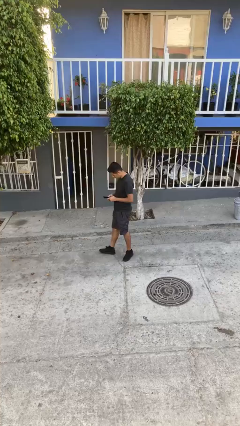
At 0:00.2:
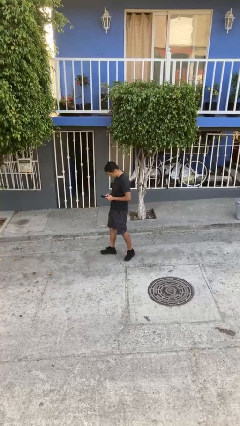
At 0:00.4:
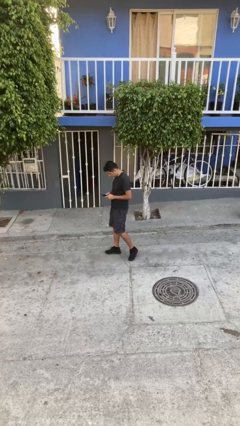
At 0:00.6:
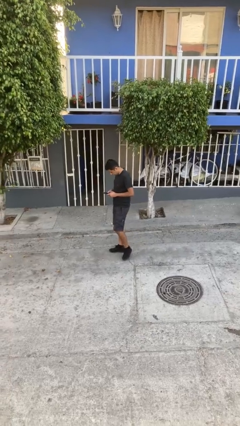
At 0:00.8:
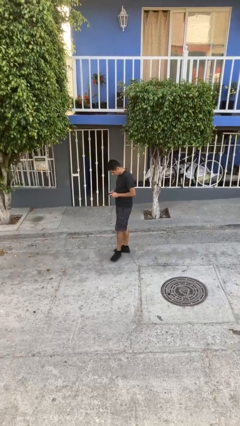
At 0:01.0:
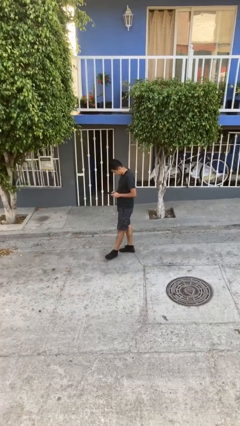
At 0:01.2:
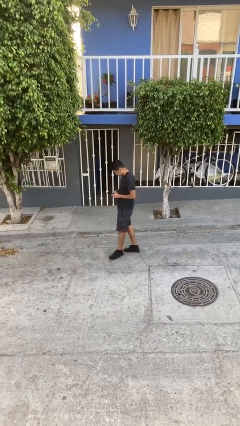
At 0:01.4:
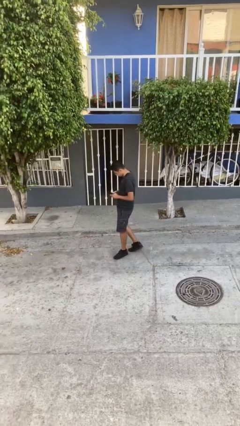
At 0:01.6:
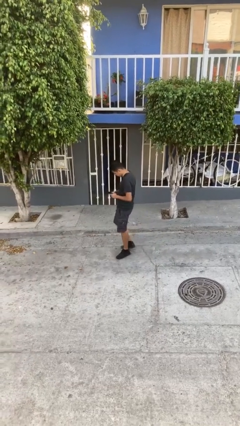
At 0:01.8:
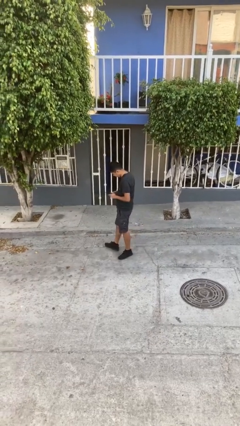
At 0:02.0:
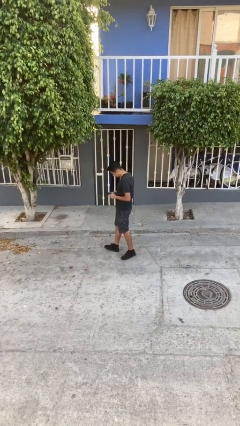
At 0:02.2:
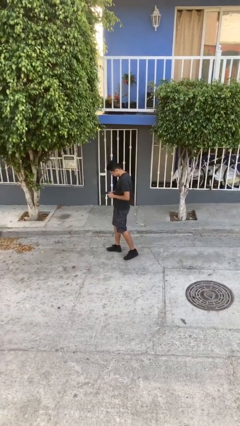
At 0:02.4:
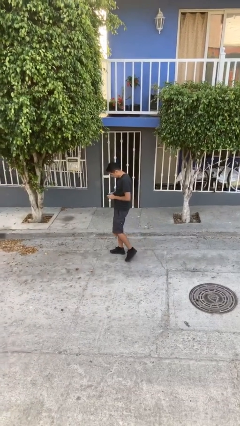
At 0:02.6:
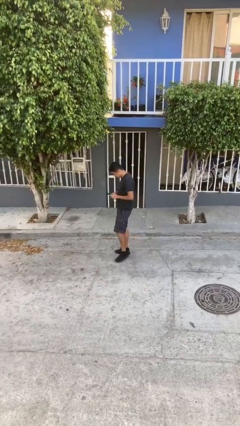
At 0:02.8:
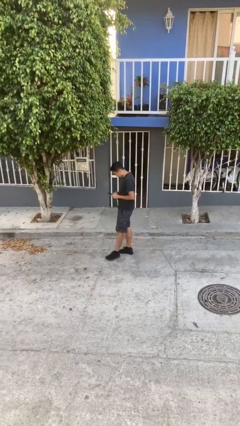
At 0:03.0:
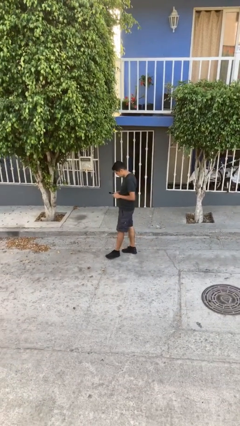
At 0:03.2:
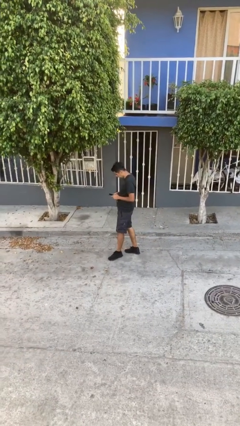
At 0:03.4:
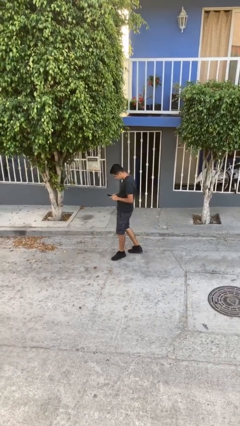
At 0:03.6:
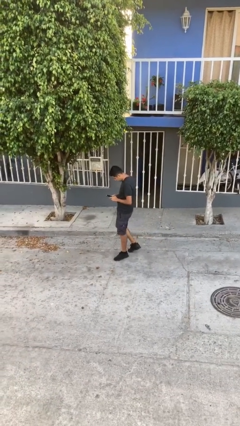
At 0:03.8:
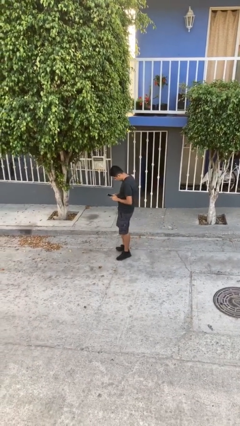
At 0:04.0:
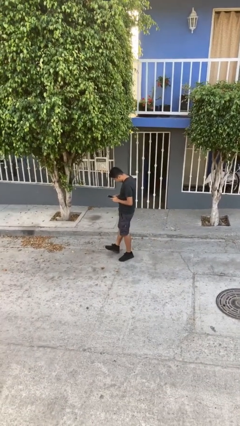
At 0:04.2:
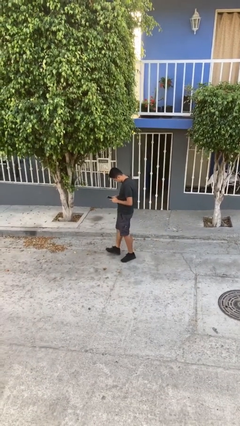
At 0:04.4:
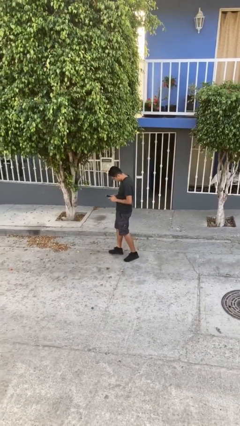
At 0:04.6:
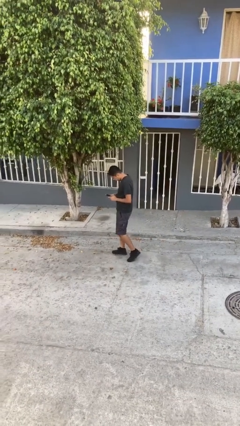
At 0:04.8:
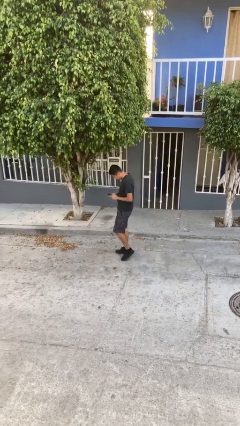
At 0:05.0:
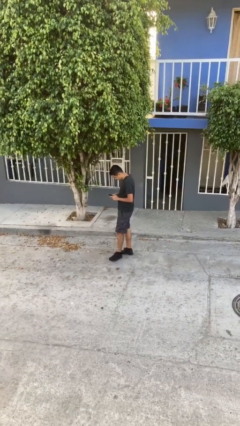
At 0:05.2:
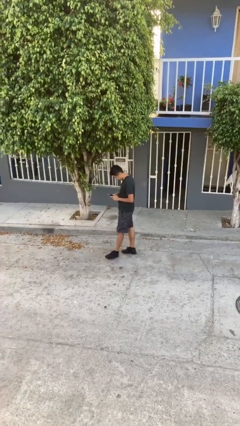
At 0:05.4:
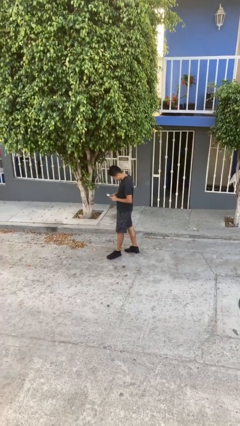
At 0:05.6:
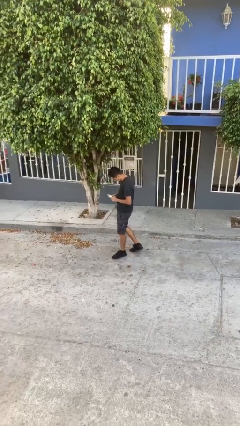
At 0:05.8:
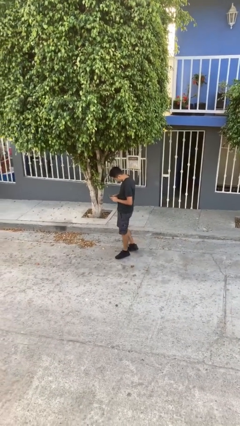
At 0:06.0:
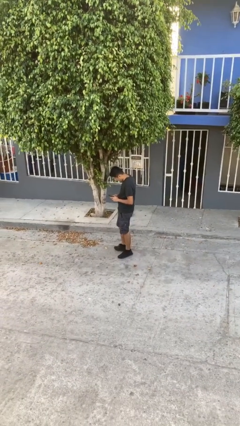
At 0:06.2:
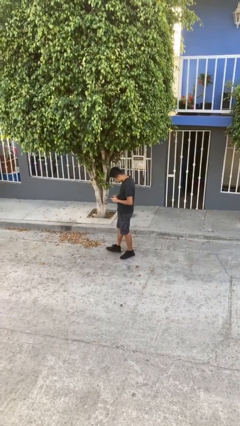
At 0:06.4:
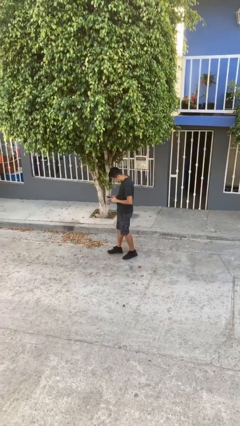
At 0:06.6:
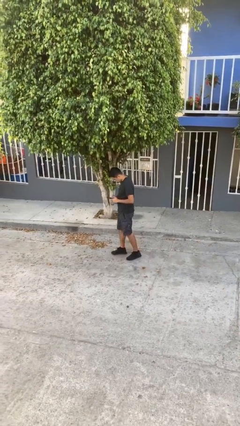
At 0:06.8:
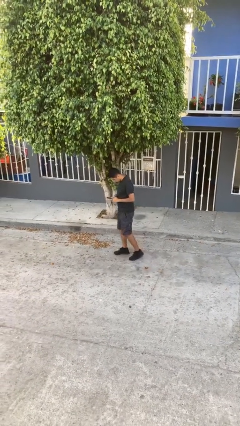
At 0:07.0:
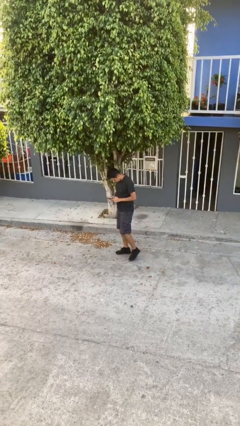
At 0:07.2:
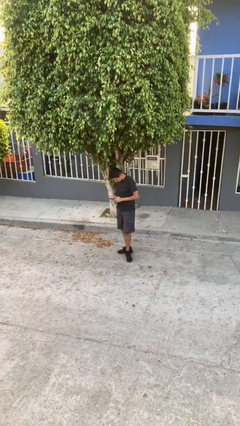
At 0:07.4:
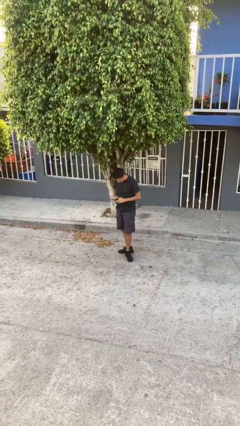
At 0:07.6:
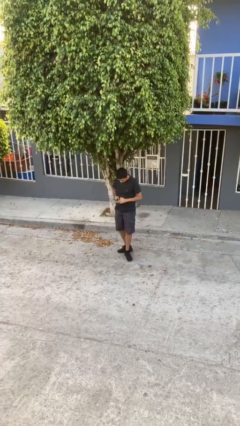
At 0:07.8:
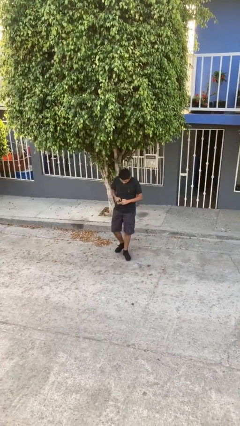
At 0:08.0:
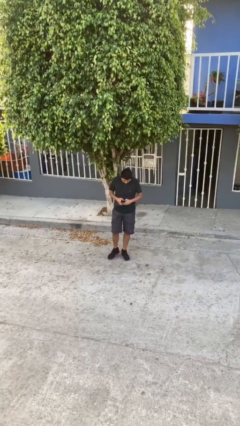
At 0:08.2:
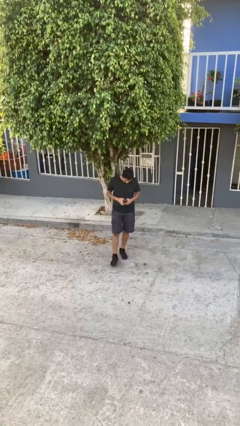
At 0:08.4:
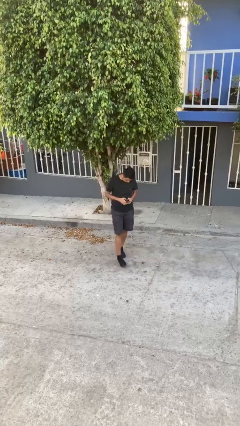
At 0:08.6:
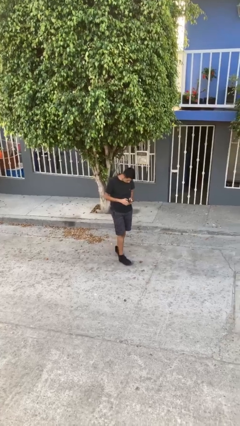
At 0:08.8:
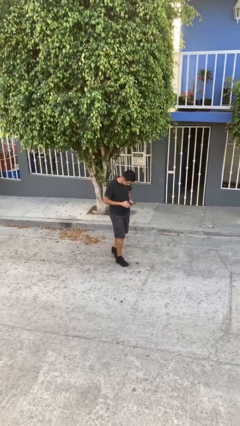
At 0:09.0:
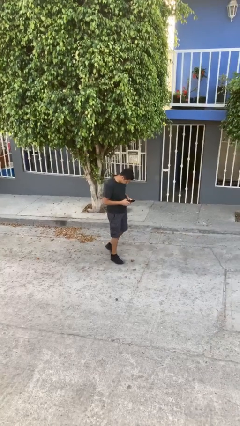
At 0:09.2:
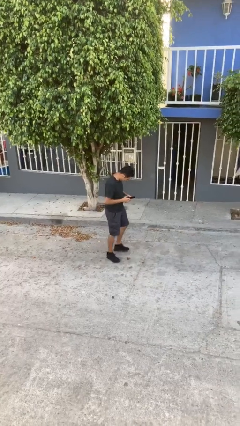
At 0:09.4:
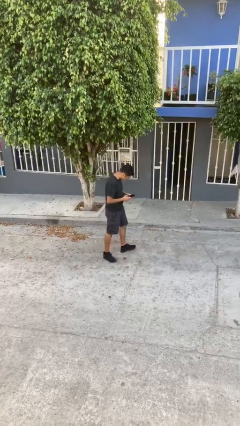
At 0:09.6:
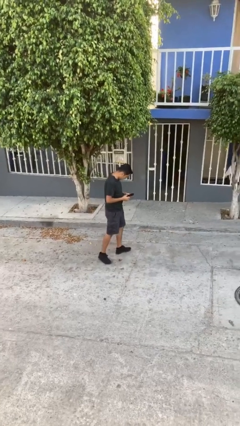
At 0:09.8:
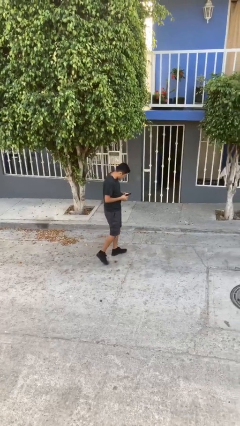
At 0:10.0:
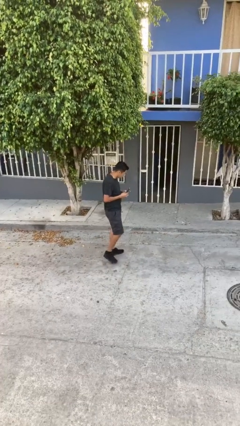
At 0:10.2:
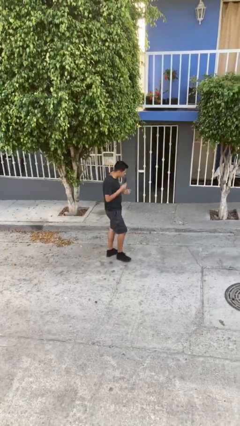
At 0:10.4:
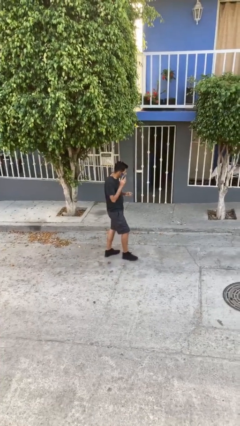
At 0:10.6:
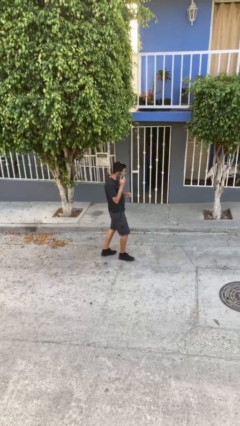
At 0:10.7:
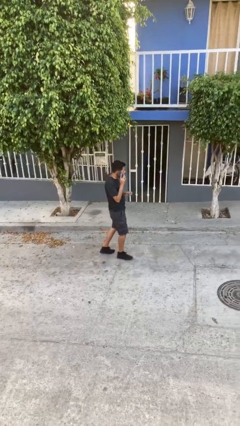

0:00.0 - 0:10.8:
person texts on phone

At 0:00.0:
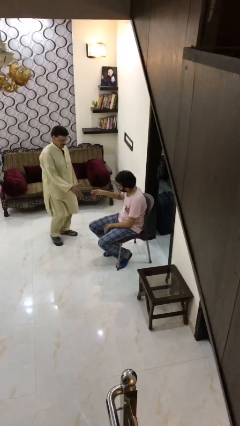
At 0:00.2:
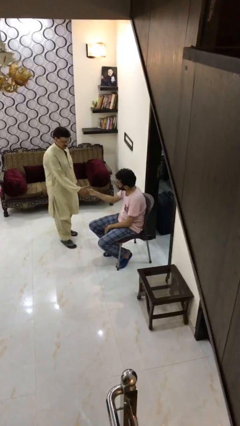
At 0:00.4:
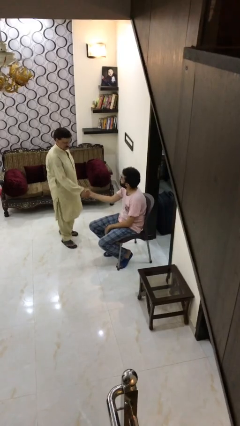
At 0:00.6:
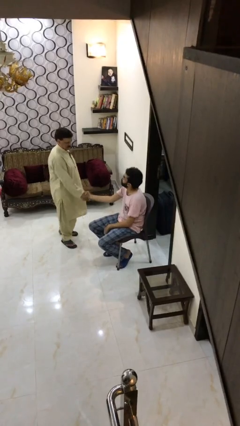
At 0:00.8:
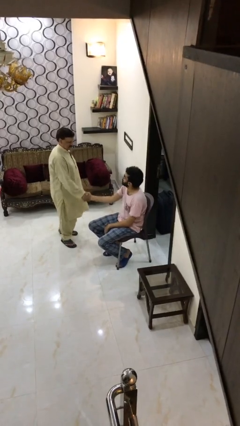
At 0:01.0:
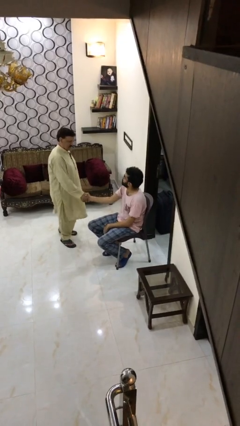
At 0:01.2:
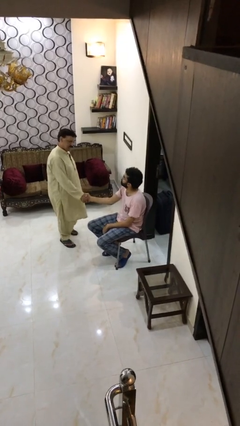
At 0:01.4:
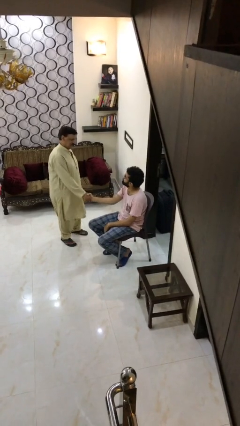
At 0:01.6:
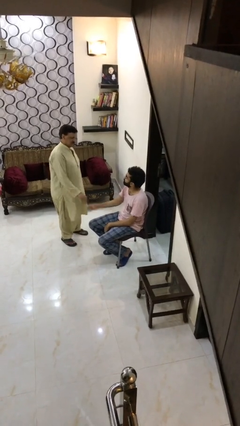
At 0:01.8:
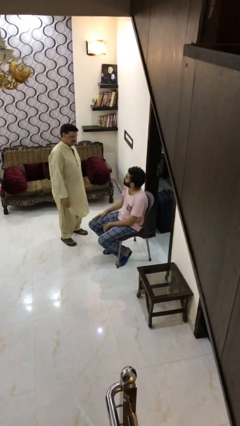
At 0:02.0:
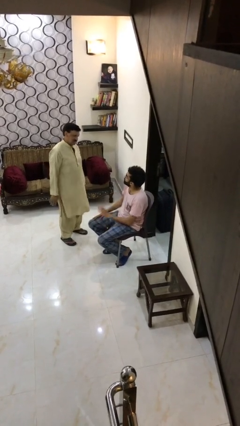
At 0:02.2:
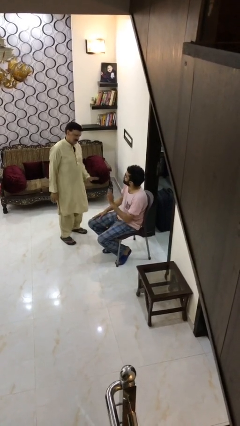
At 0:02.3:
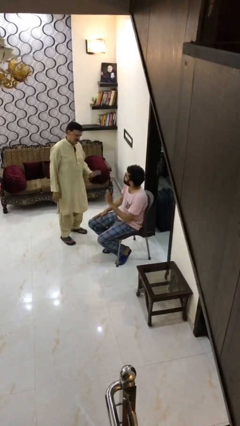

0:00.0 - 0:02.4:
person shakes hand

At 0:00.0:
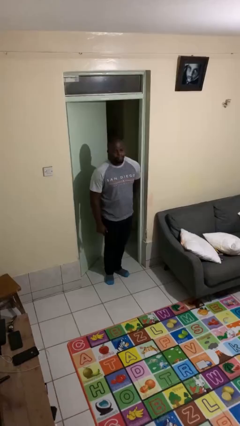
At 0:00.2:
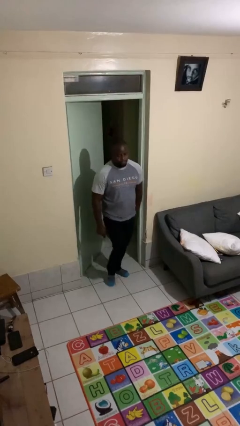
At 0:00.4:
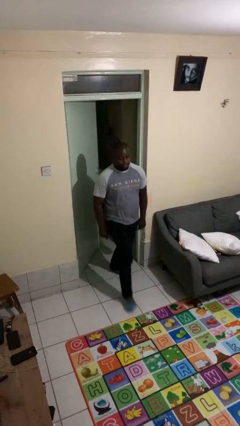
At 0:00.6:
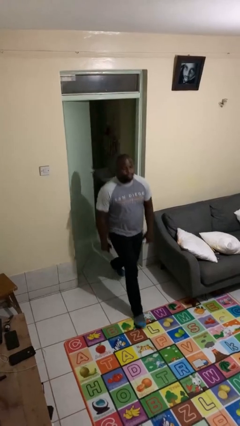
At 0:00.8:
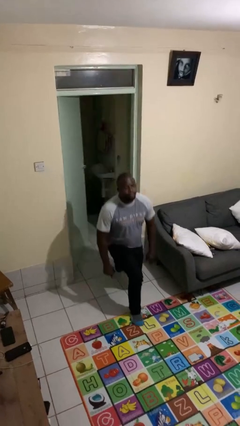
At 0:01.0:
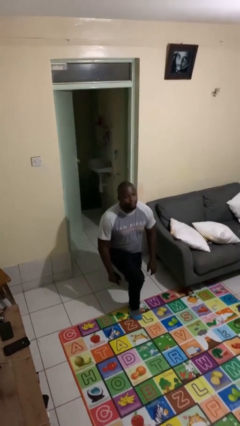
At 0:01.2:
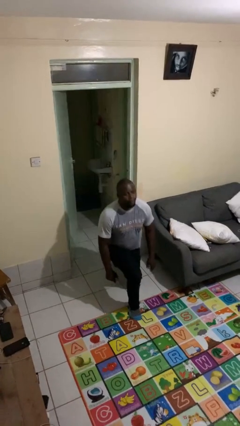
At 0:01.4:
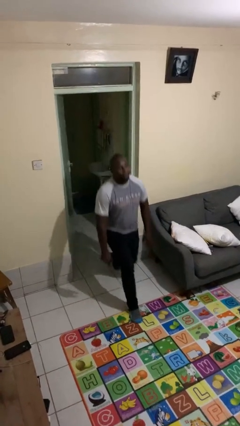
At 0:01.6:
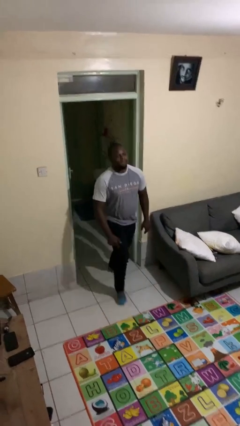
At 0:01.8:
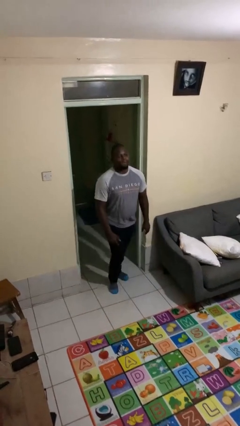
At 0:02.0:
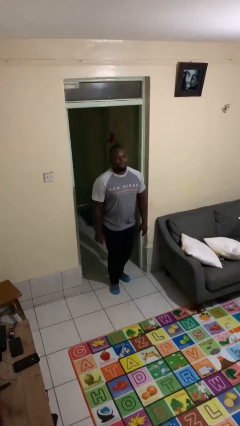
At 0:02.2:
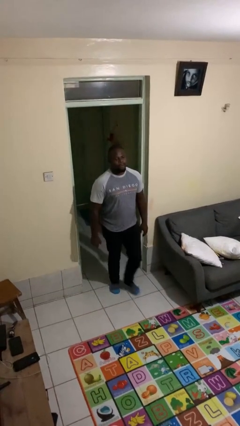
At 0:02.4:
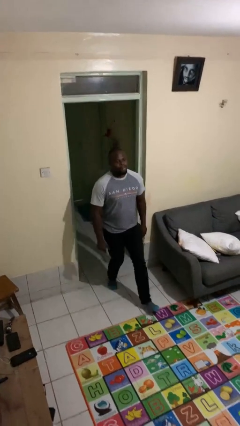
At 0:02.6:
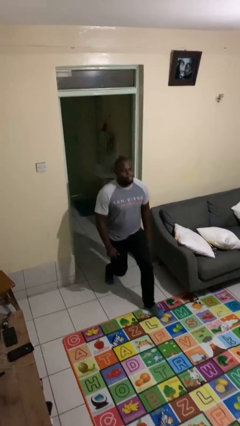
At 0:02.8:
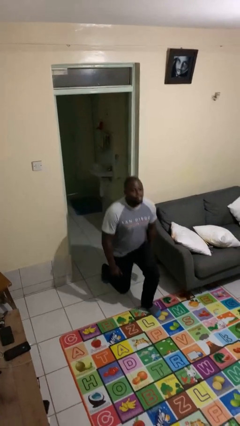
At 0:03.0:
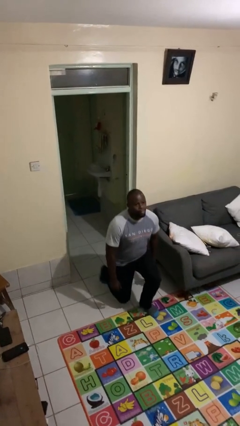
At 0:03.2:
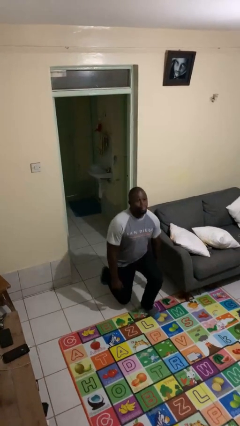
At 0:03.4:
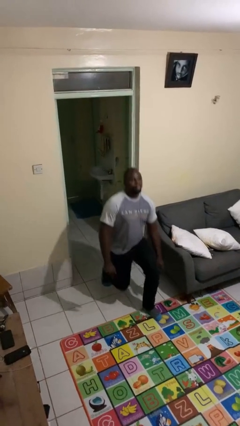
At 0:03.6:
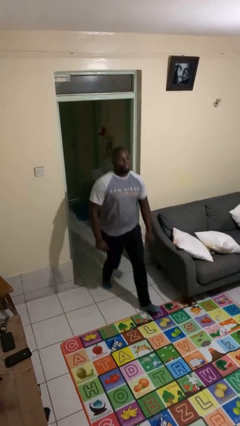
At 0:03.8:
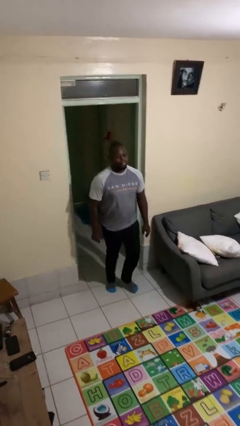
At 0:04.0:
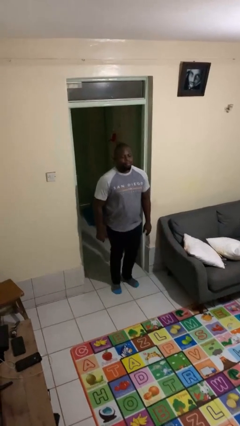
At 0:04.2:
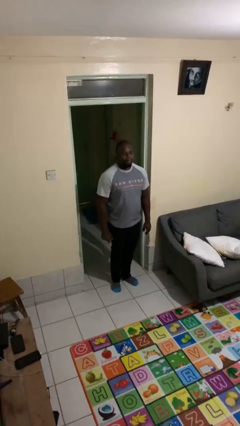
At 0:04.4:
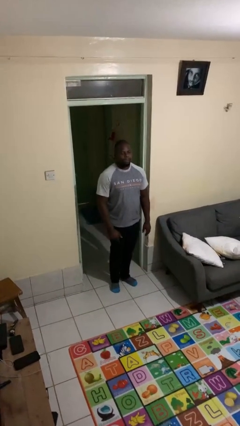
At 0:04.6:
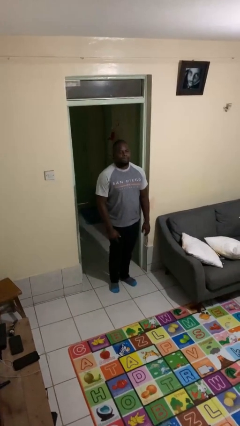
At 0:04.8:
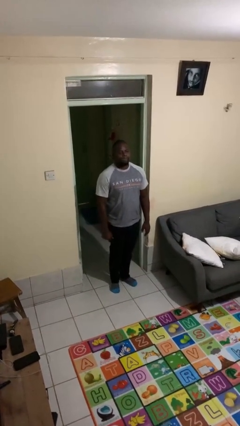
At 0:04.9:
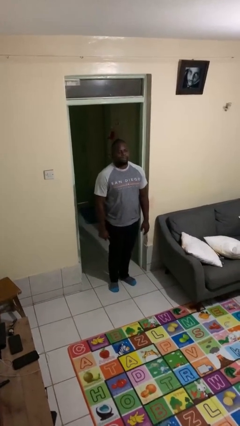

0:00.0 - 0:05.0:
person exercises with lunges
